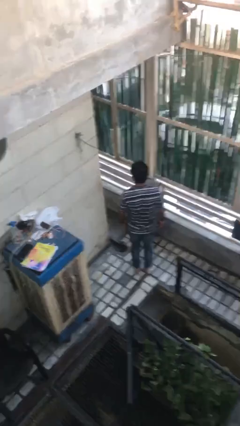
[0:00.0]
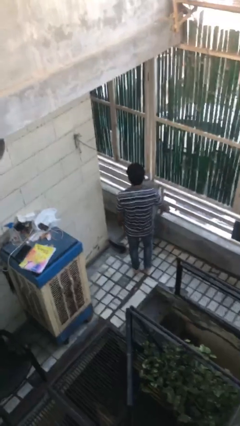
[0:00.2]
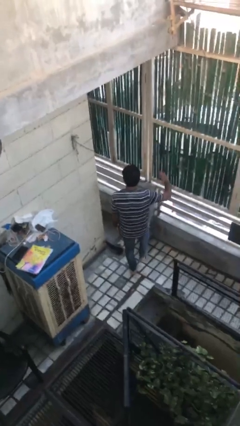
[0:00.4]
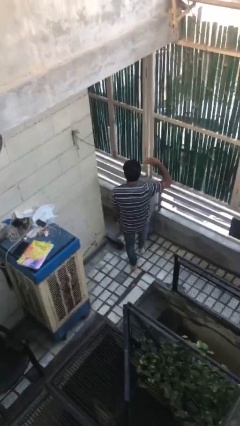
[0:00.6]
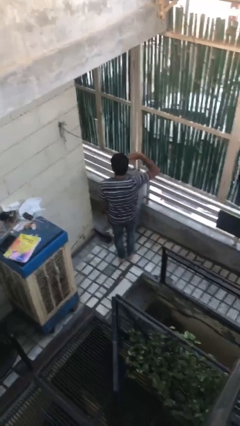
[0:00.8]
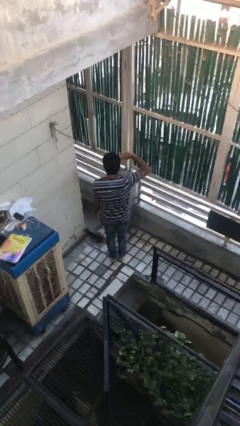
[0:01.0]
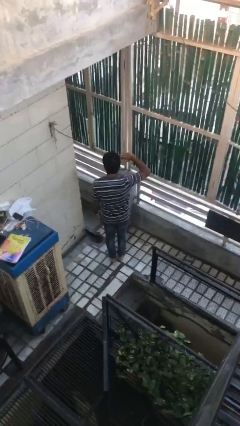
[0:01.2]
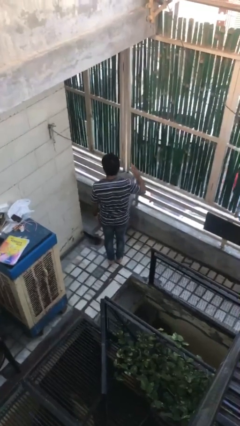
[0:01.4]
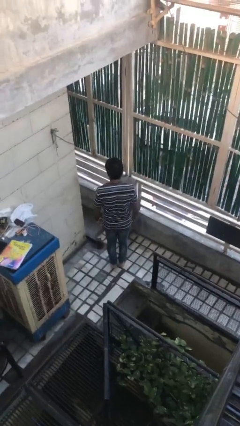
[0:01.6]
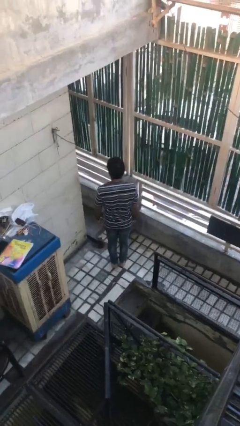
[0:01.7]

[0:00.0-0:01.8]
person salutes

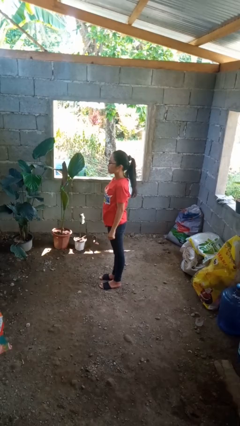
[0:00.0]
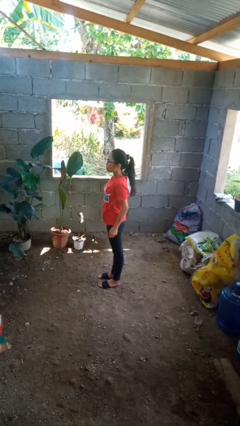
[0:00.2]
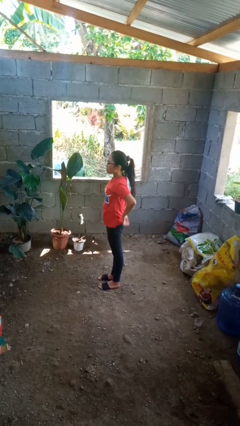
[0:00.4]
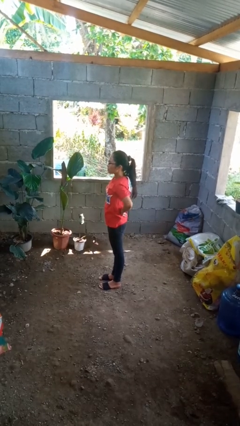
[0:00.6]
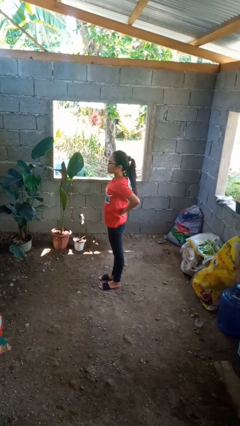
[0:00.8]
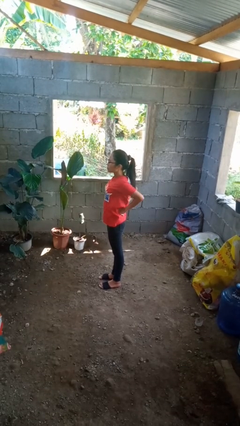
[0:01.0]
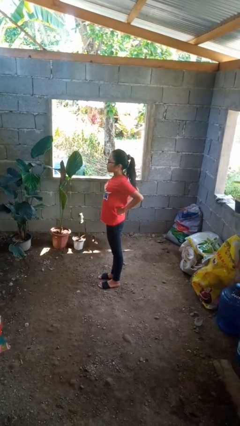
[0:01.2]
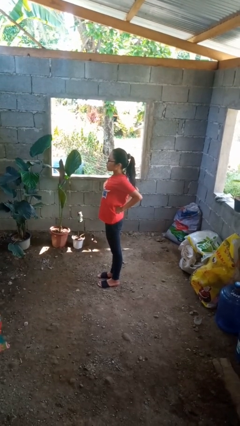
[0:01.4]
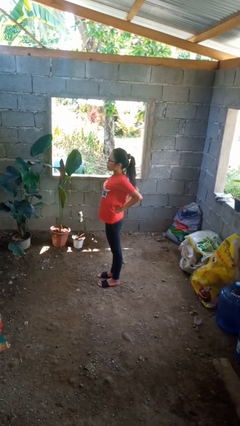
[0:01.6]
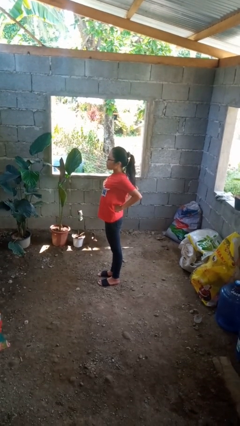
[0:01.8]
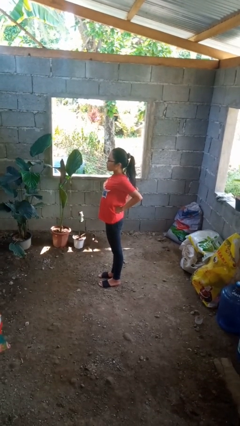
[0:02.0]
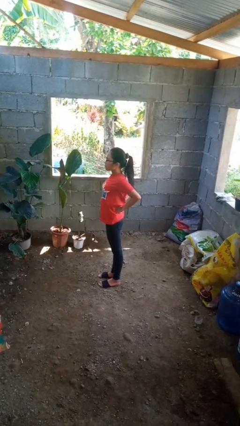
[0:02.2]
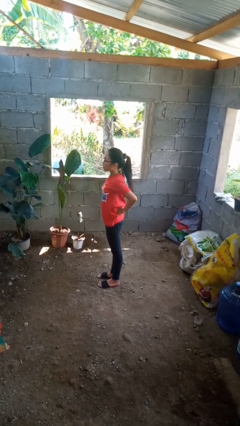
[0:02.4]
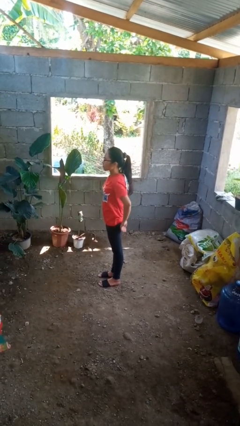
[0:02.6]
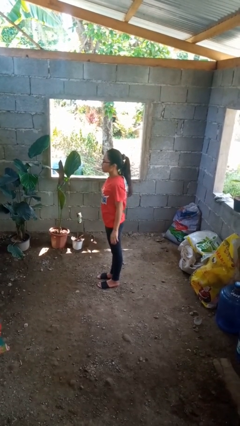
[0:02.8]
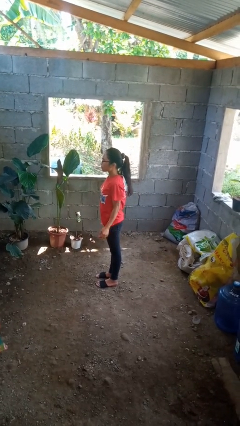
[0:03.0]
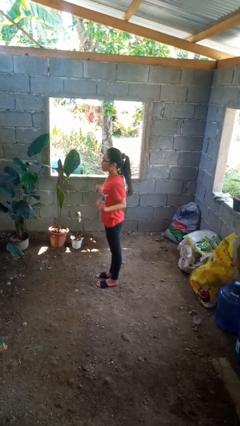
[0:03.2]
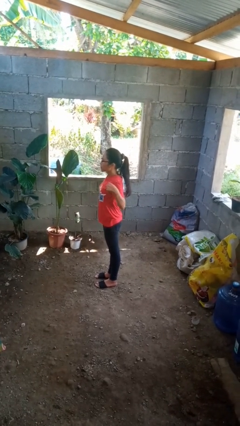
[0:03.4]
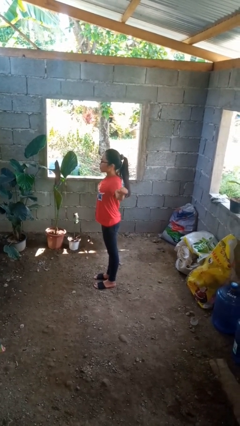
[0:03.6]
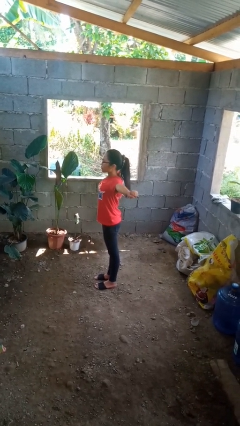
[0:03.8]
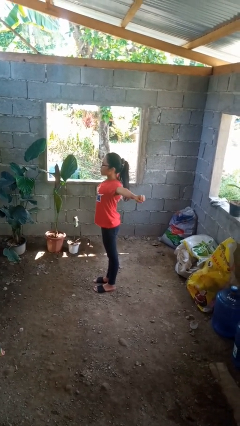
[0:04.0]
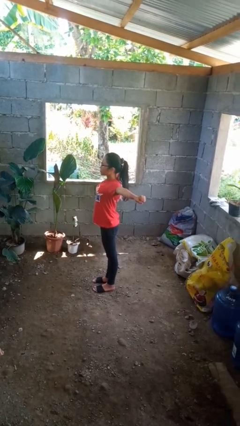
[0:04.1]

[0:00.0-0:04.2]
person stretches back

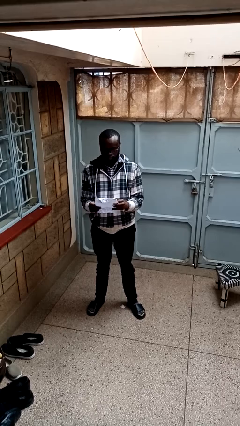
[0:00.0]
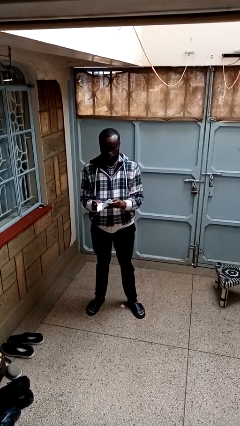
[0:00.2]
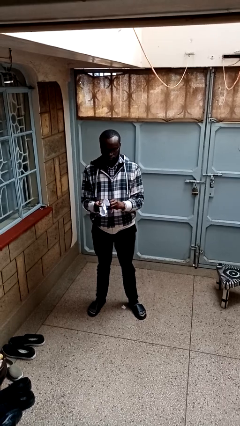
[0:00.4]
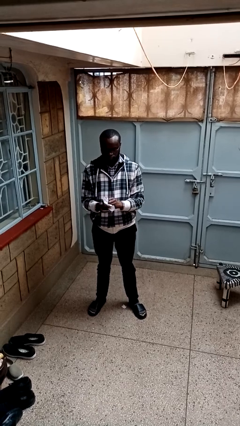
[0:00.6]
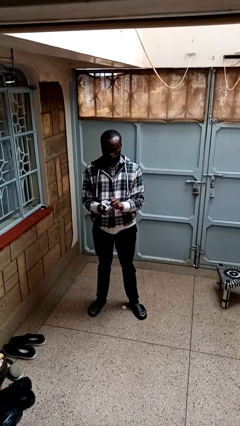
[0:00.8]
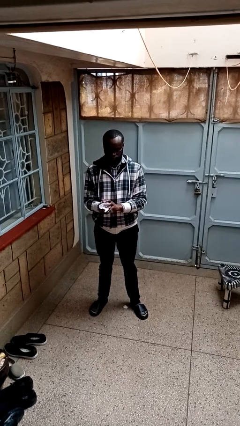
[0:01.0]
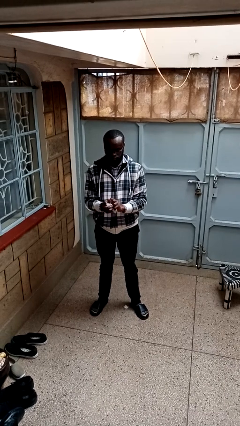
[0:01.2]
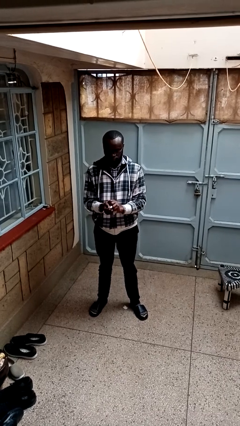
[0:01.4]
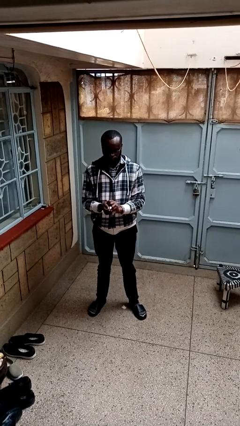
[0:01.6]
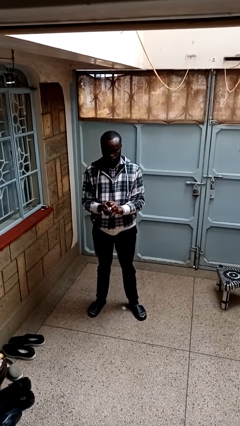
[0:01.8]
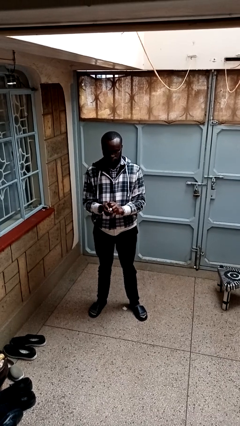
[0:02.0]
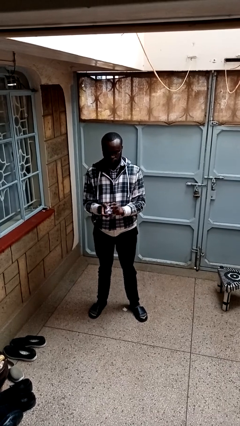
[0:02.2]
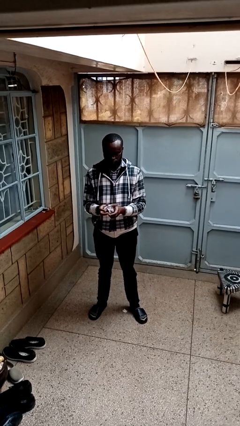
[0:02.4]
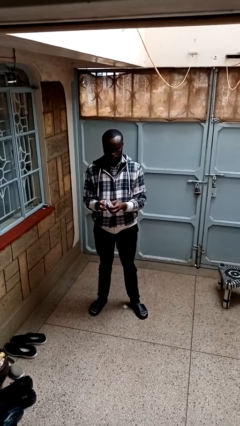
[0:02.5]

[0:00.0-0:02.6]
person crumples paper

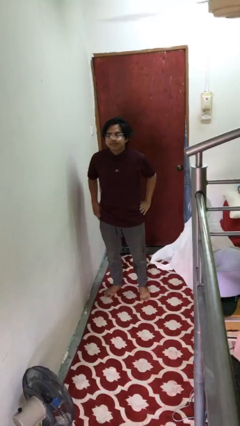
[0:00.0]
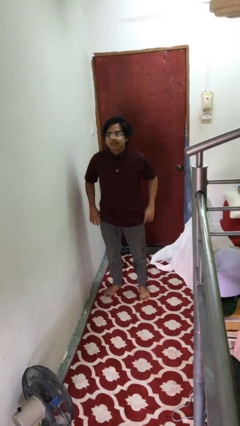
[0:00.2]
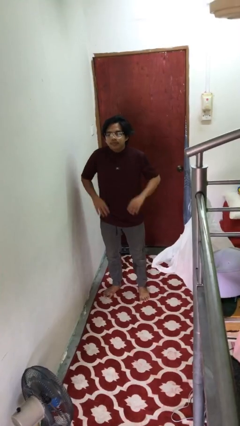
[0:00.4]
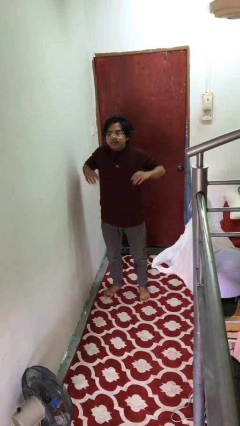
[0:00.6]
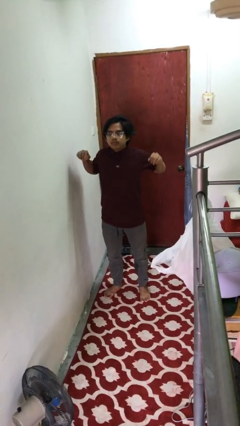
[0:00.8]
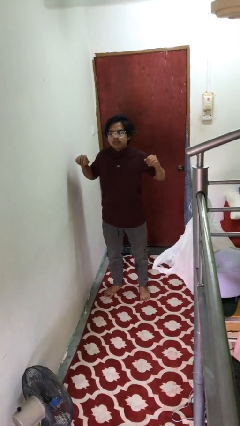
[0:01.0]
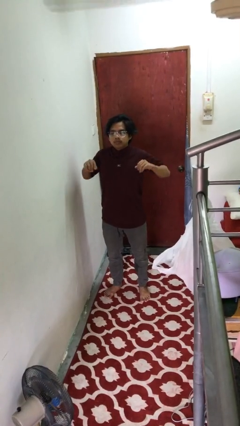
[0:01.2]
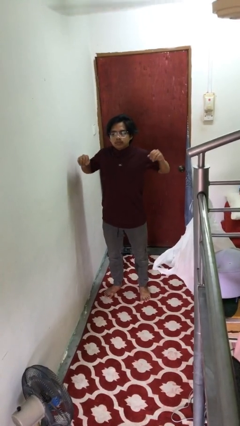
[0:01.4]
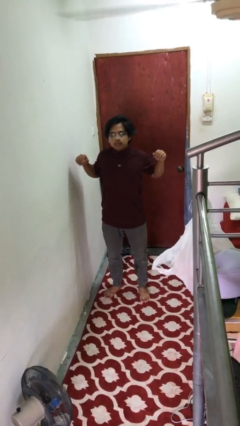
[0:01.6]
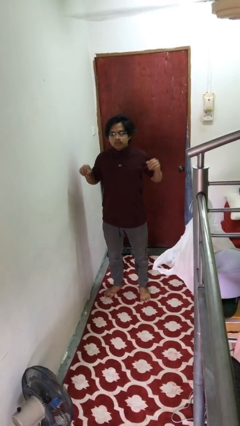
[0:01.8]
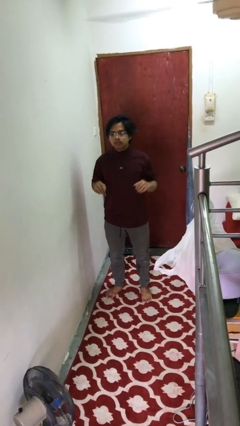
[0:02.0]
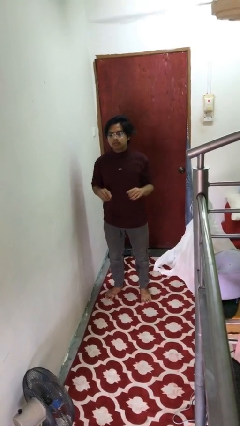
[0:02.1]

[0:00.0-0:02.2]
person stretches arms to side

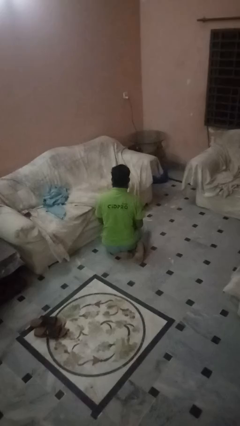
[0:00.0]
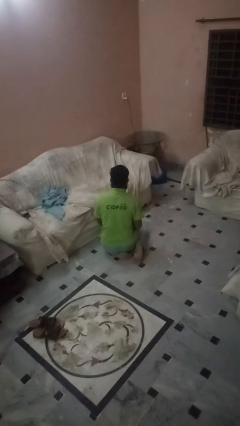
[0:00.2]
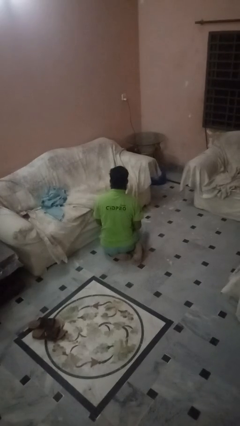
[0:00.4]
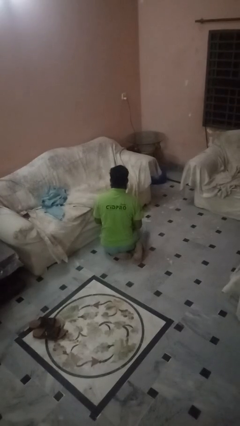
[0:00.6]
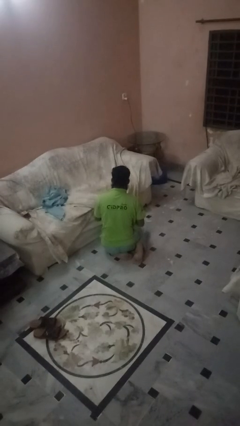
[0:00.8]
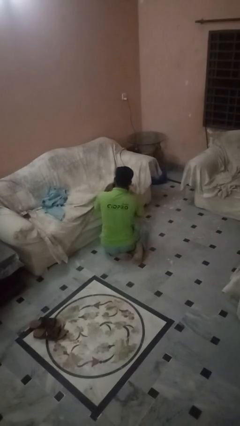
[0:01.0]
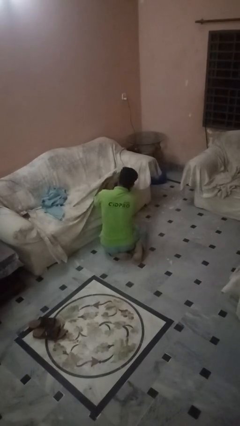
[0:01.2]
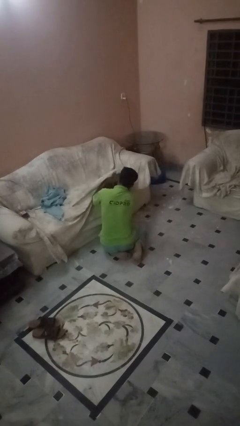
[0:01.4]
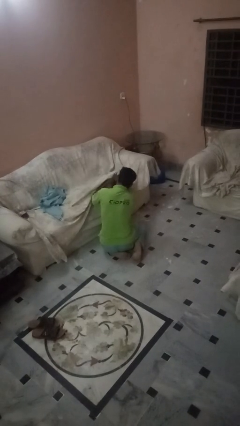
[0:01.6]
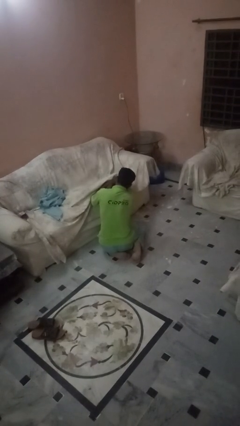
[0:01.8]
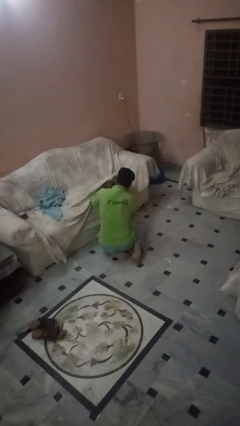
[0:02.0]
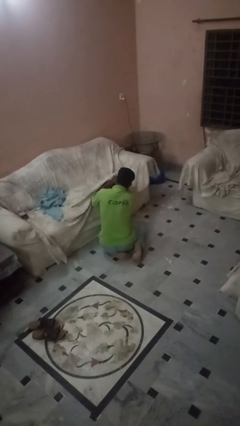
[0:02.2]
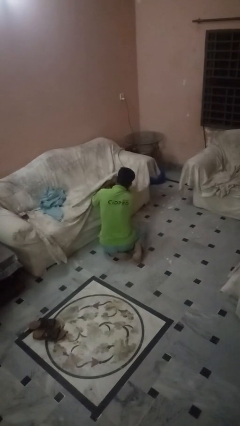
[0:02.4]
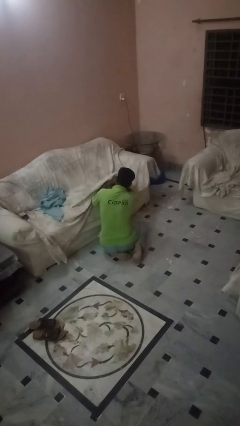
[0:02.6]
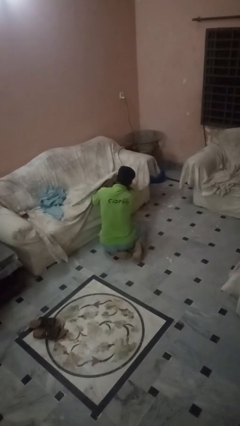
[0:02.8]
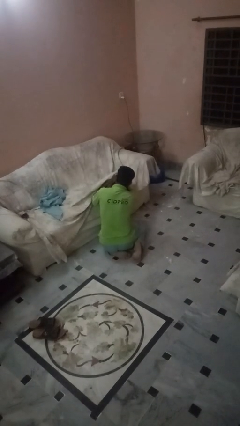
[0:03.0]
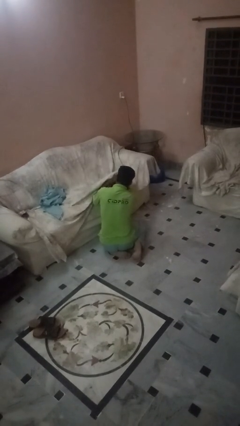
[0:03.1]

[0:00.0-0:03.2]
person searches in couch

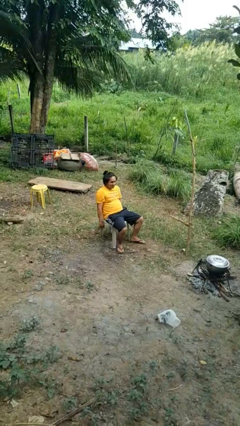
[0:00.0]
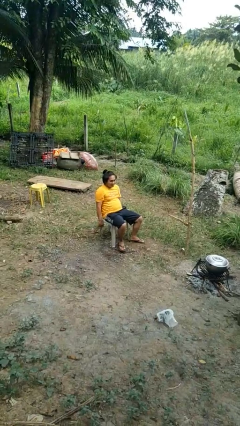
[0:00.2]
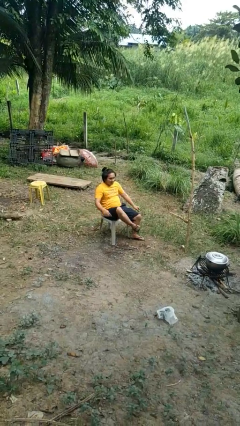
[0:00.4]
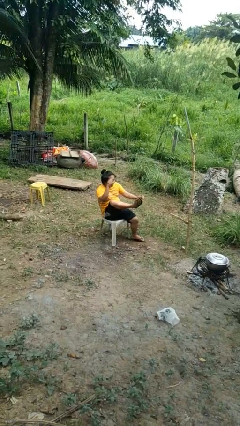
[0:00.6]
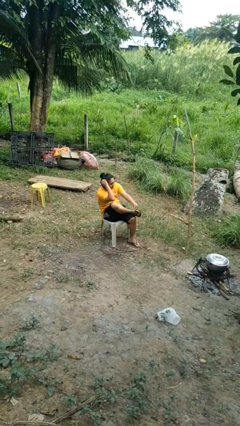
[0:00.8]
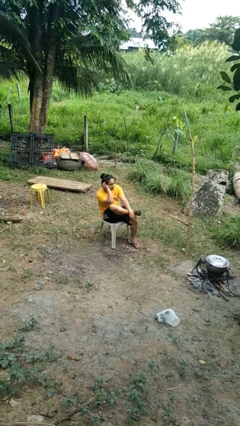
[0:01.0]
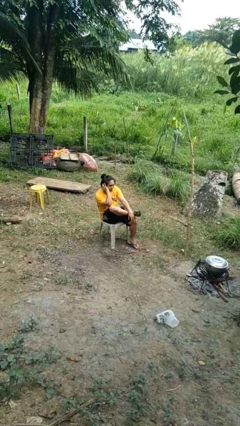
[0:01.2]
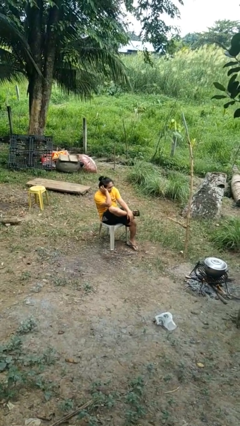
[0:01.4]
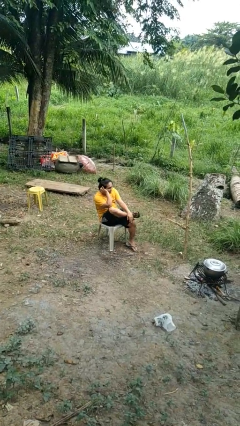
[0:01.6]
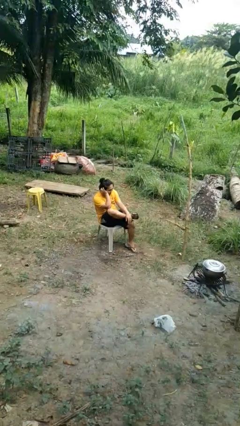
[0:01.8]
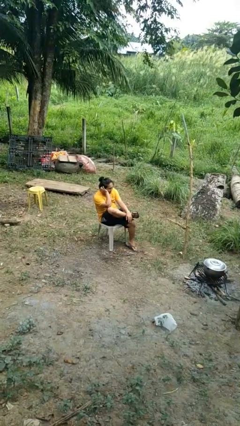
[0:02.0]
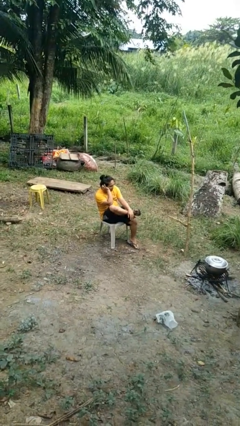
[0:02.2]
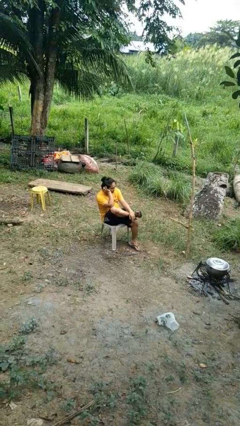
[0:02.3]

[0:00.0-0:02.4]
person crosses legs

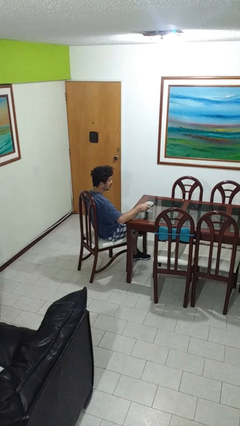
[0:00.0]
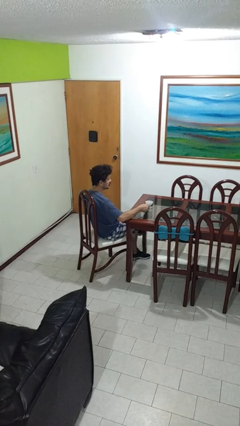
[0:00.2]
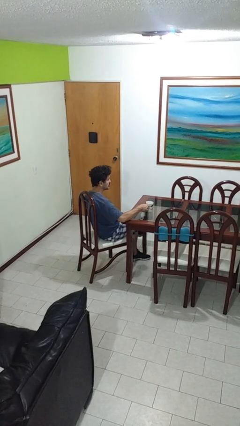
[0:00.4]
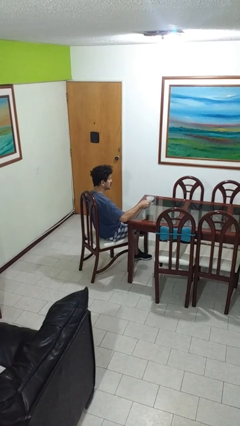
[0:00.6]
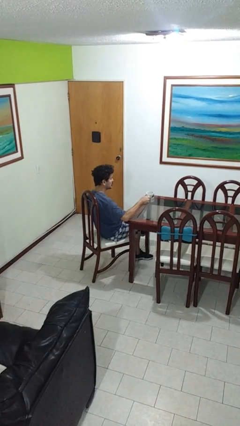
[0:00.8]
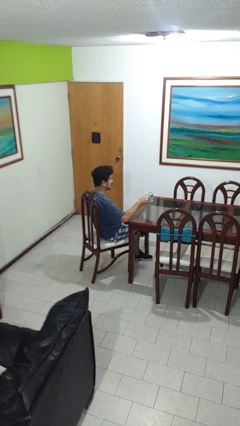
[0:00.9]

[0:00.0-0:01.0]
person picks up object from table
